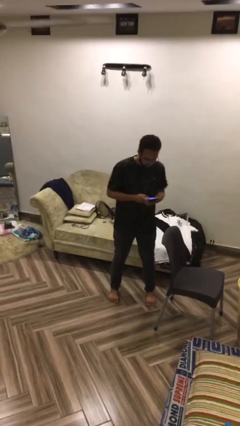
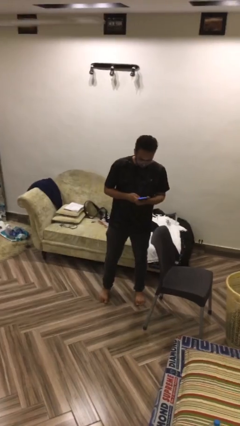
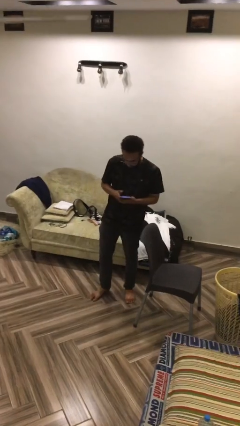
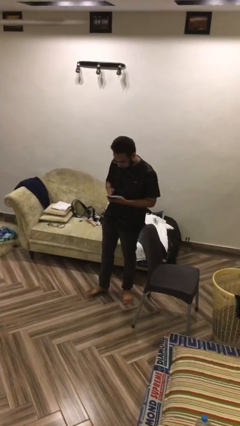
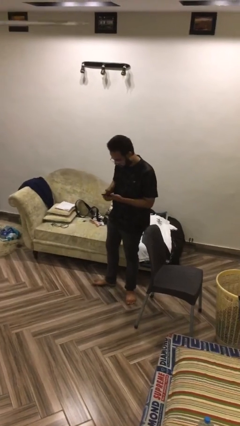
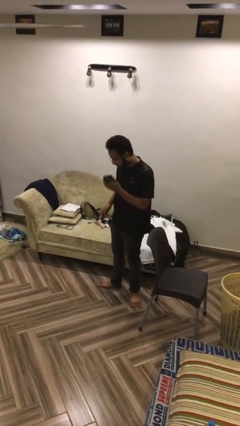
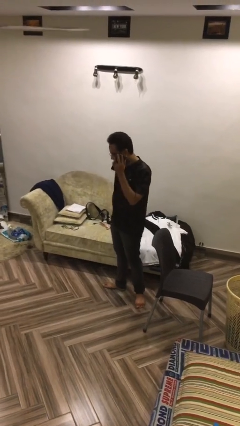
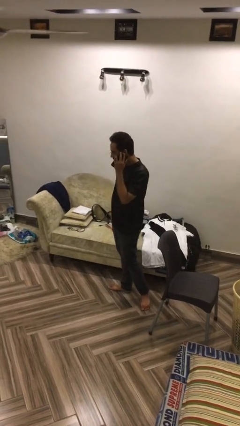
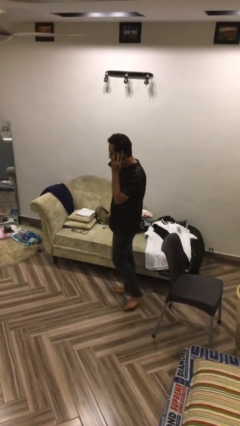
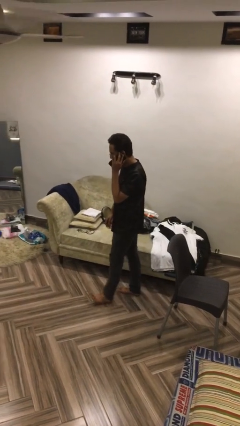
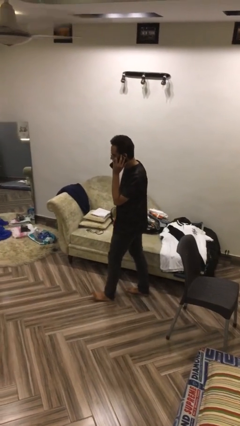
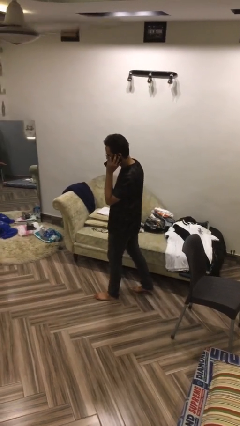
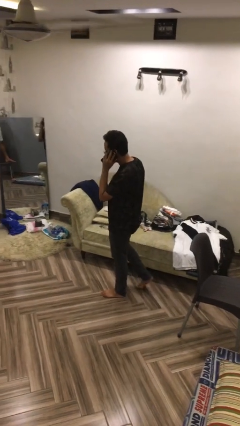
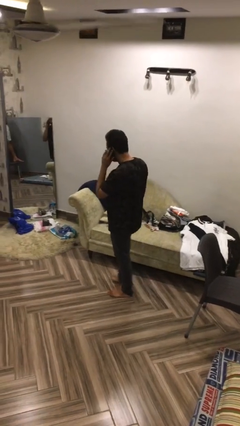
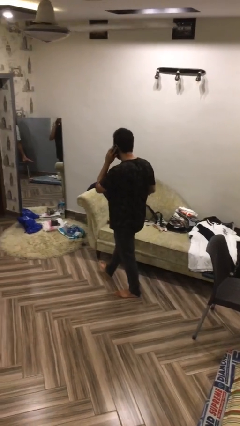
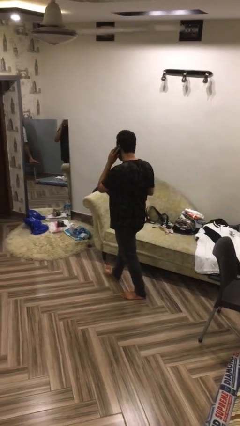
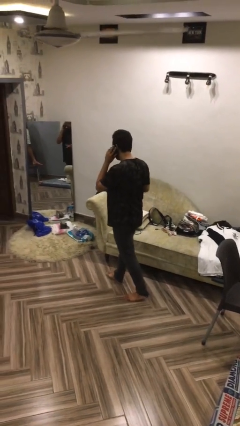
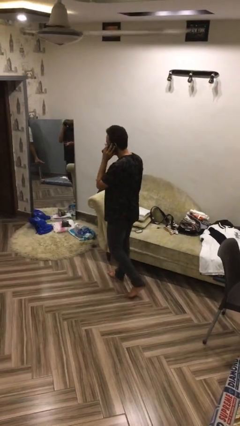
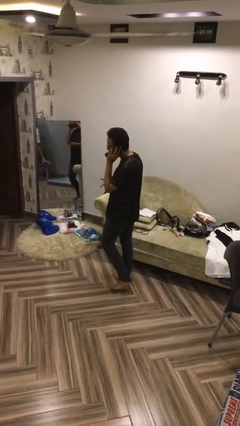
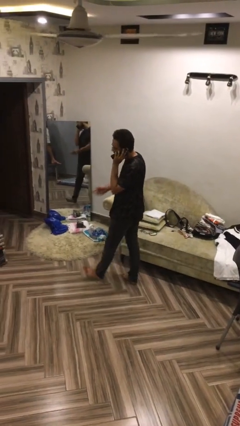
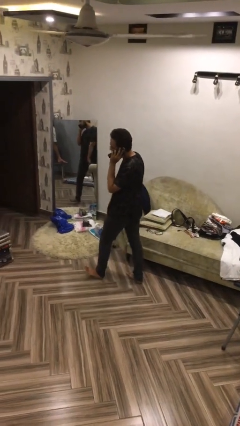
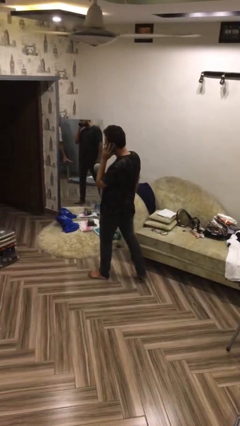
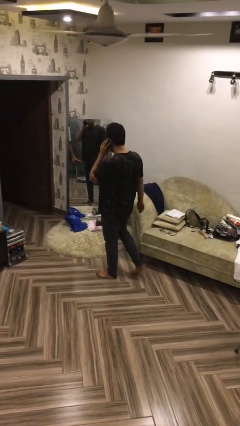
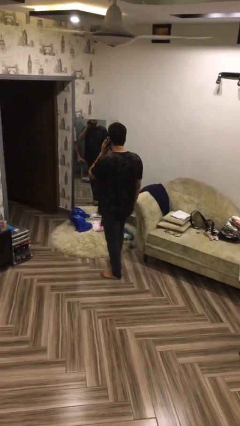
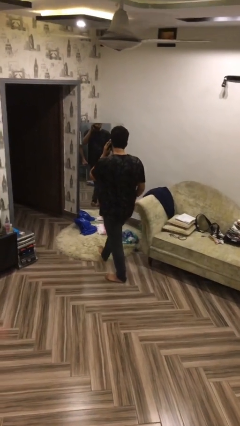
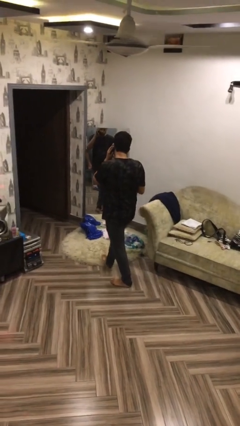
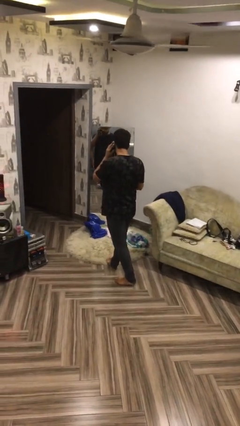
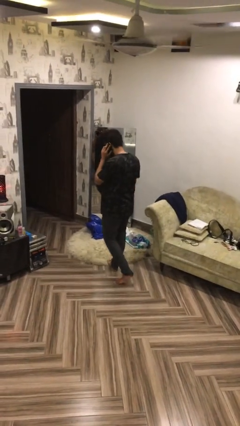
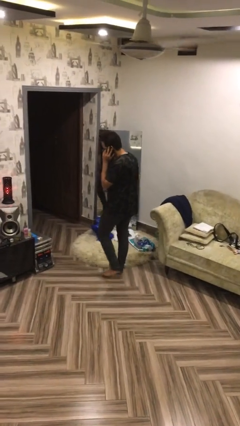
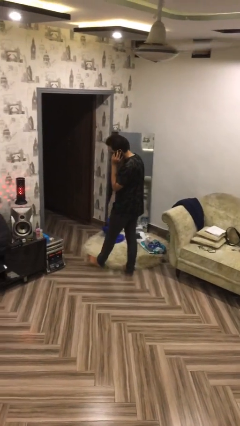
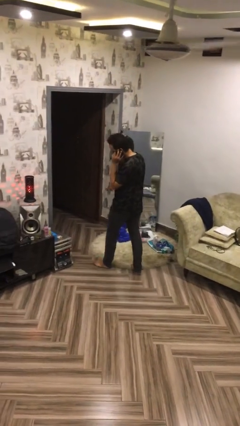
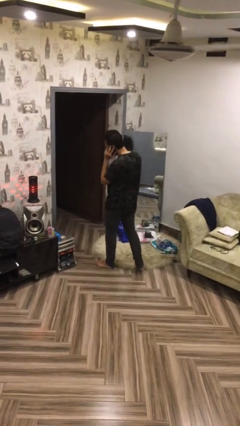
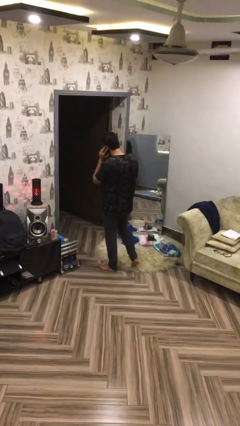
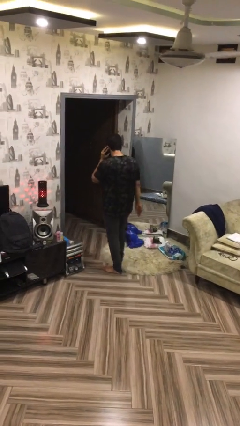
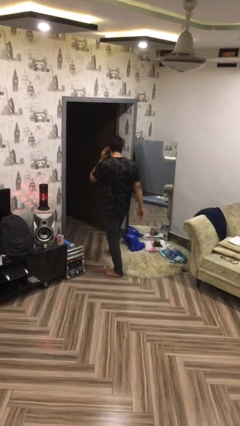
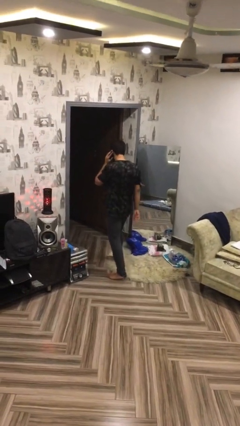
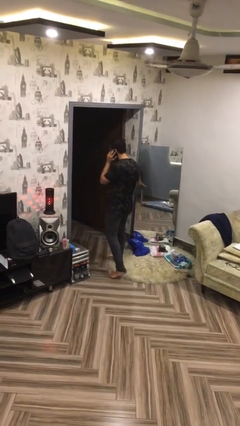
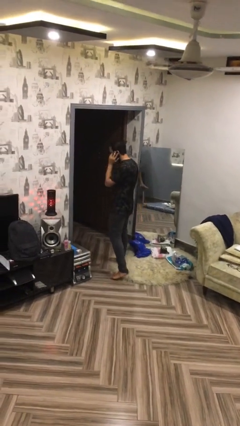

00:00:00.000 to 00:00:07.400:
person talks on phone

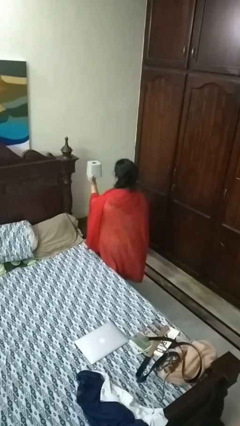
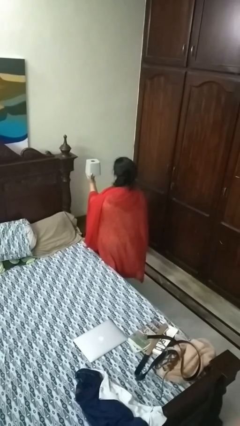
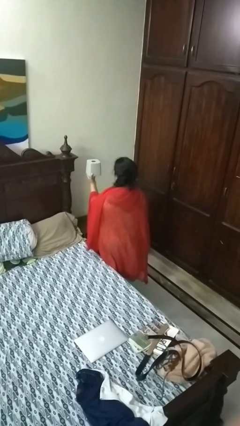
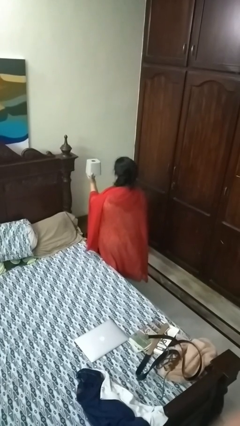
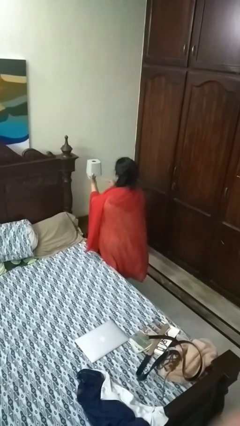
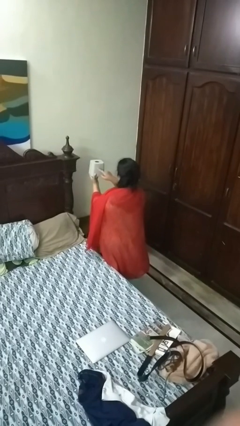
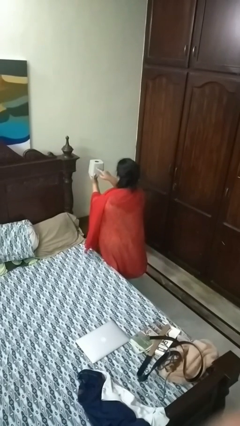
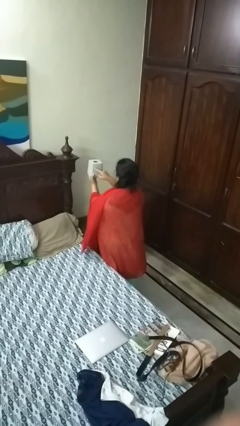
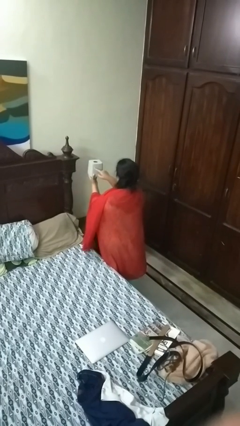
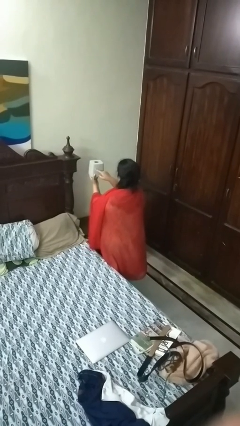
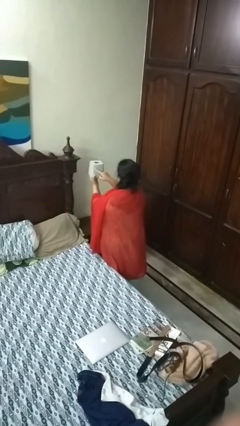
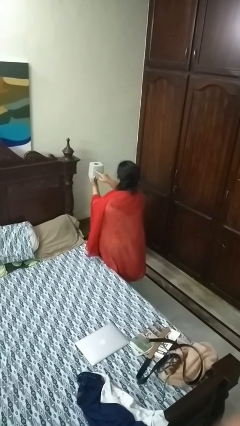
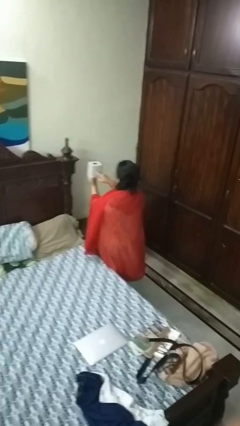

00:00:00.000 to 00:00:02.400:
person taps object with finger

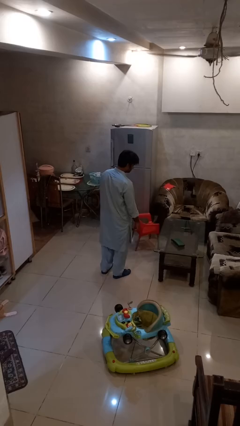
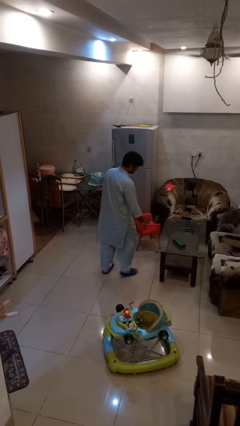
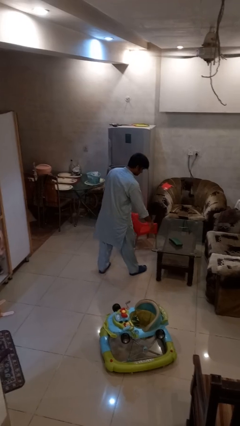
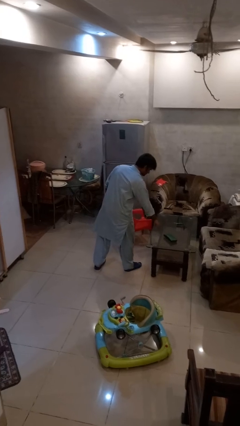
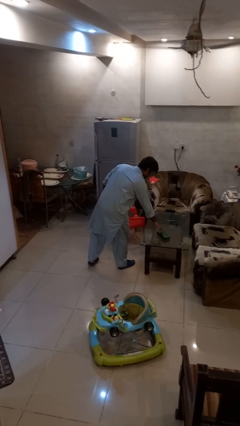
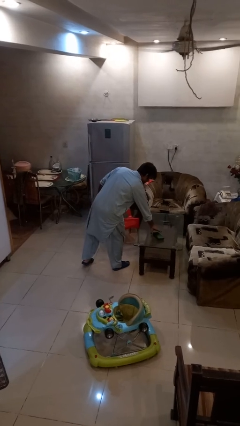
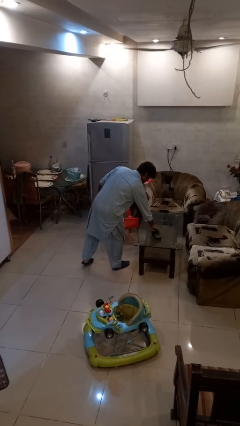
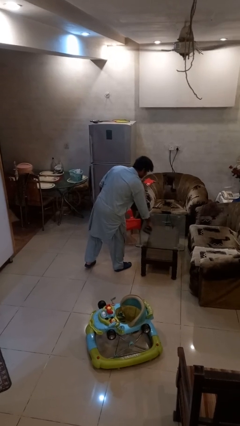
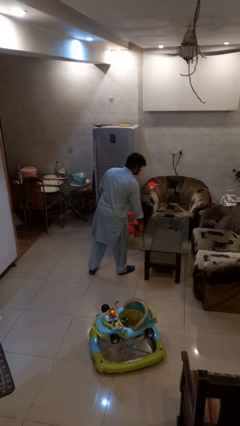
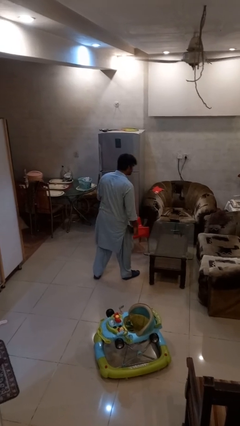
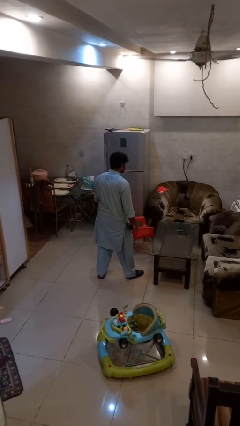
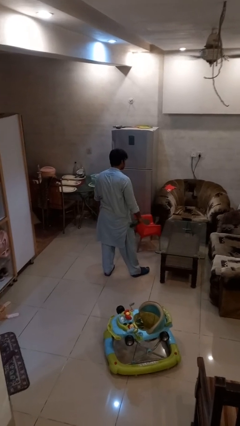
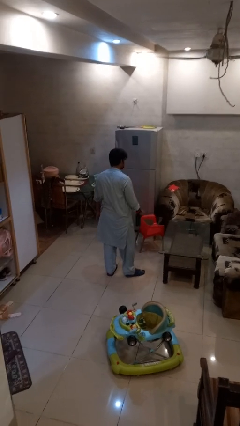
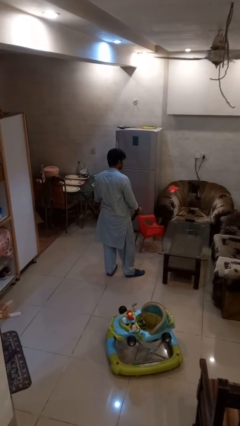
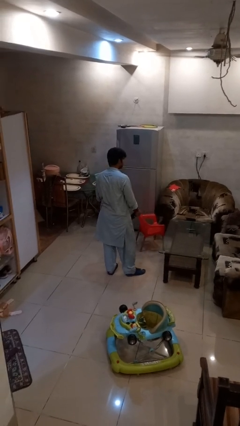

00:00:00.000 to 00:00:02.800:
person picks up object from table

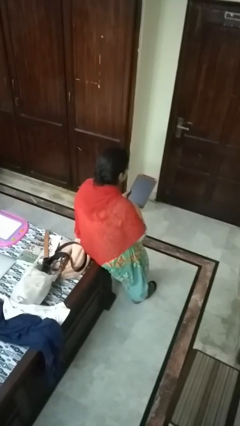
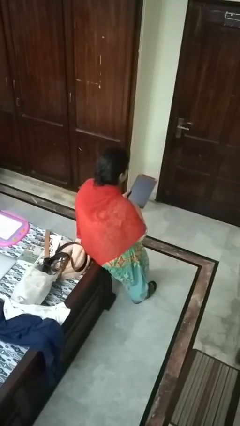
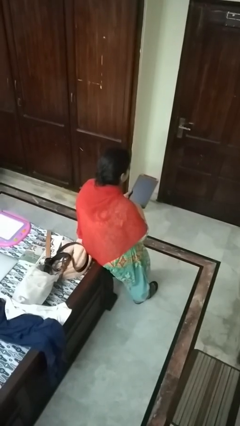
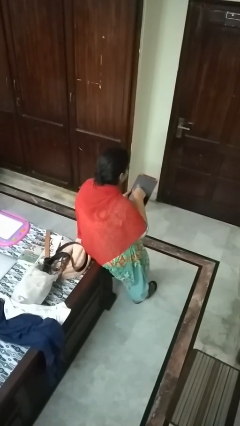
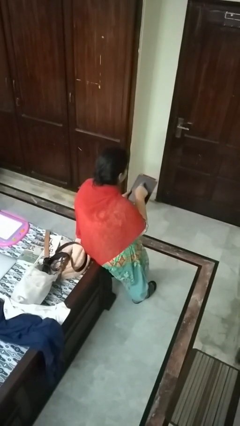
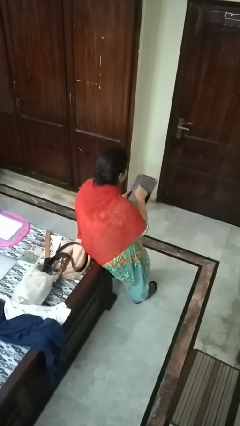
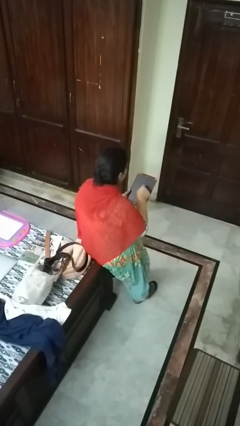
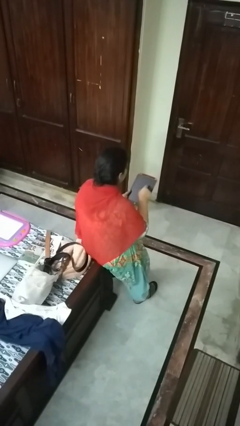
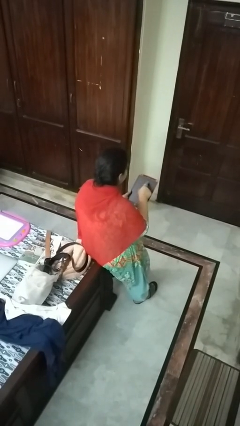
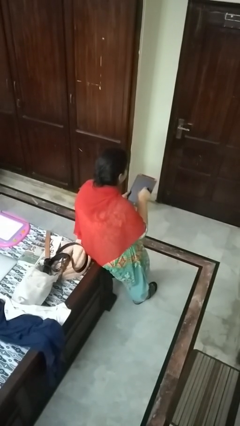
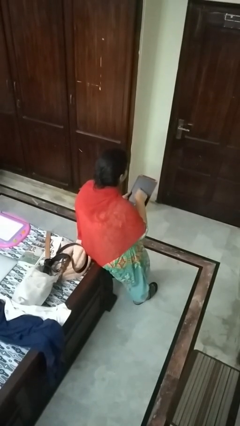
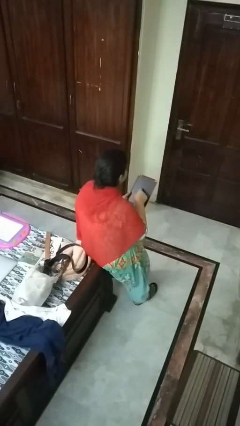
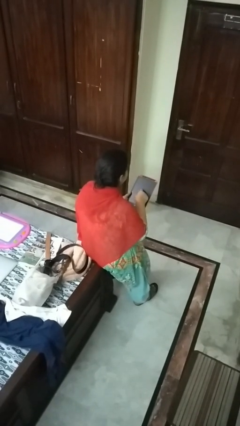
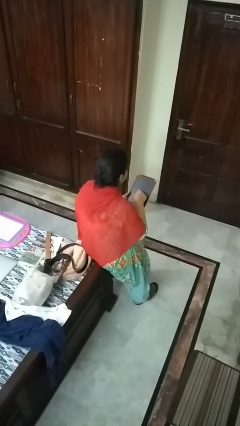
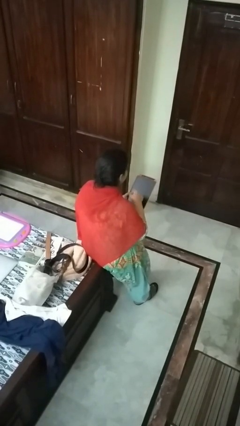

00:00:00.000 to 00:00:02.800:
person interacts with tablet

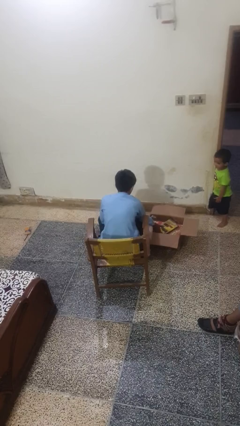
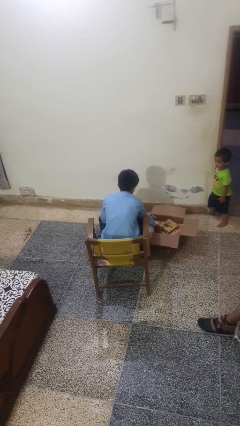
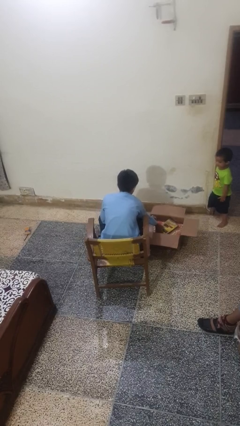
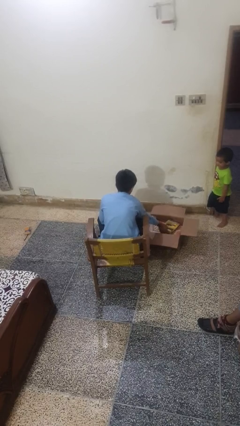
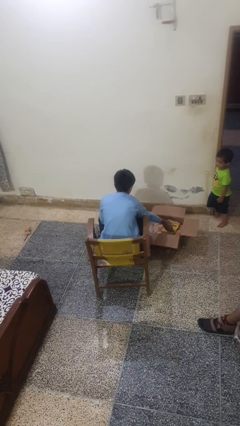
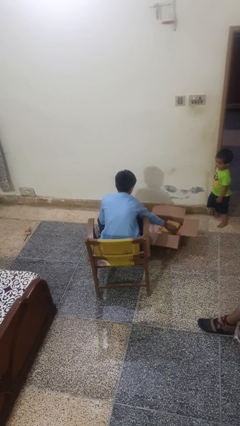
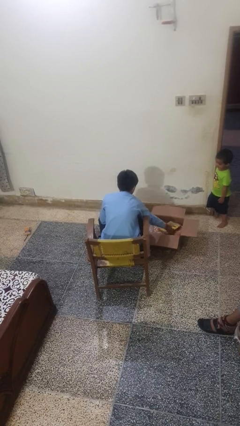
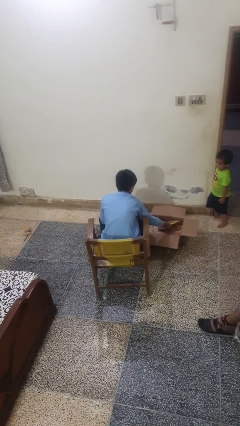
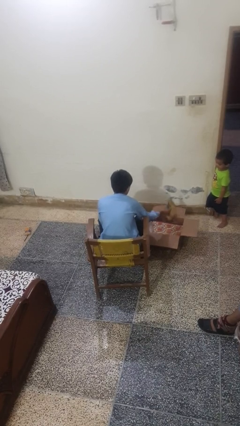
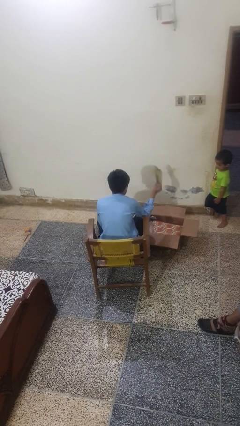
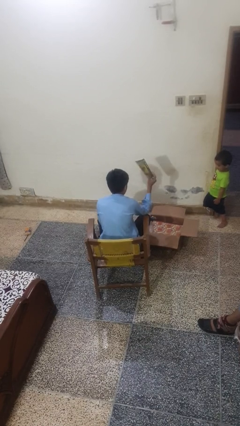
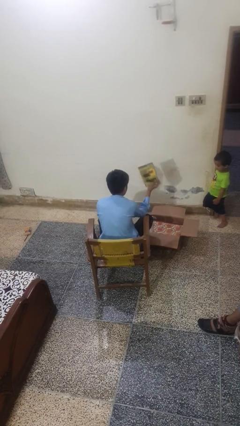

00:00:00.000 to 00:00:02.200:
person takes object from box
